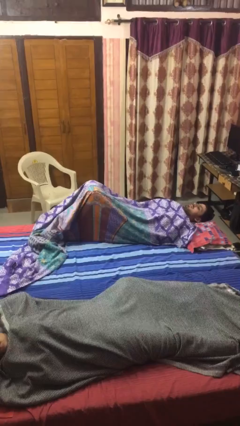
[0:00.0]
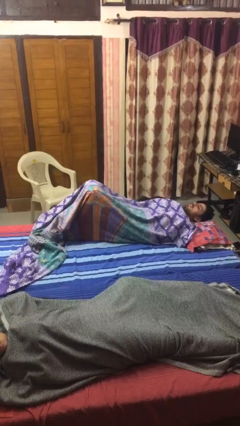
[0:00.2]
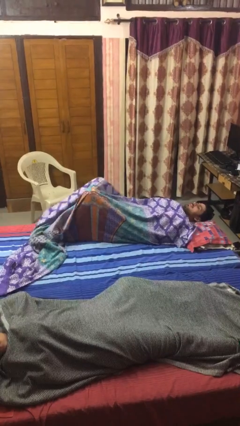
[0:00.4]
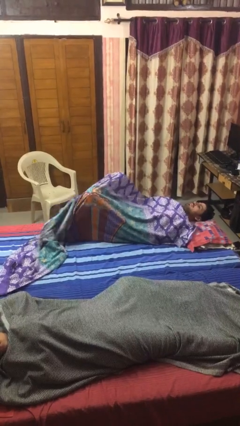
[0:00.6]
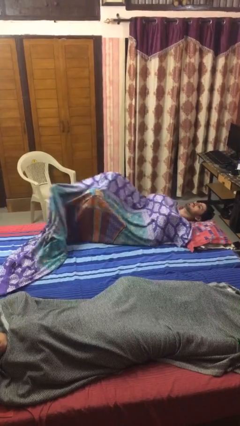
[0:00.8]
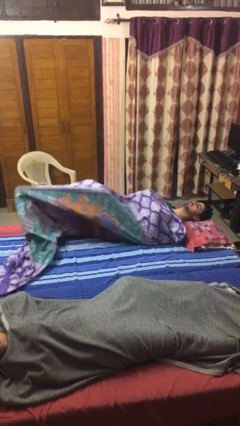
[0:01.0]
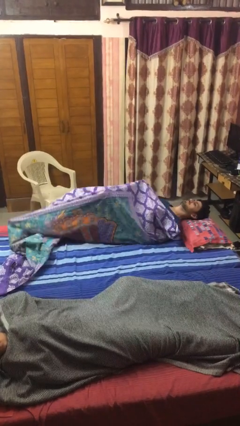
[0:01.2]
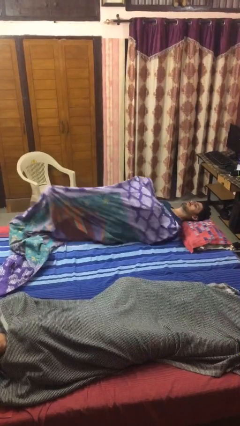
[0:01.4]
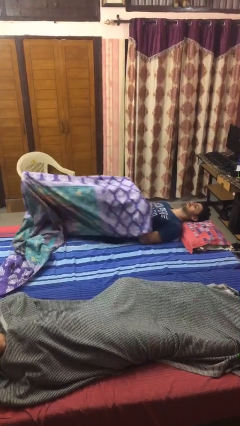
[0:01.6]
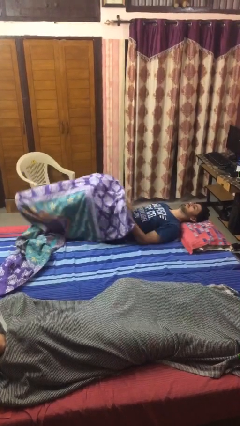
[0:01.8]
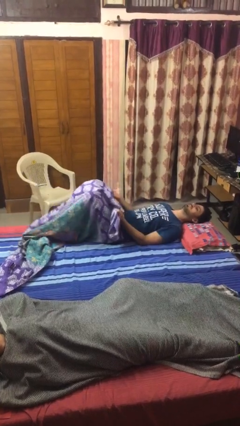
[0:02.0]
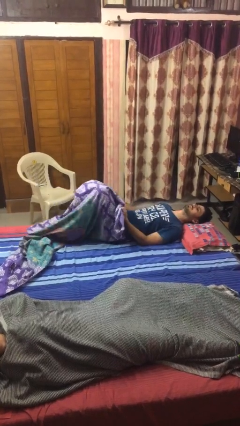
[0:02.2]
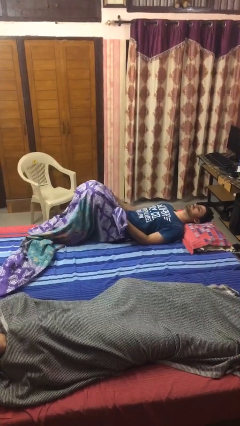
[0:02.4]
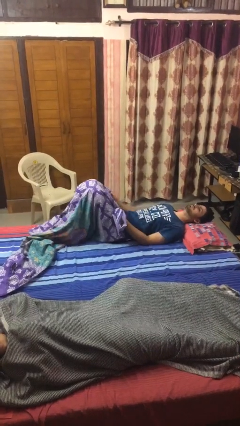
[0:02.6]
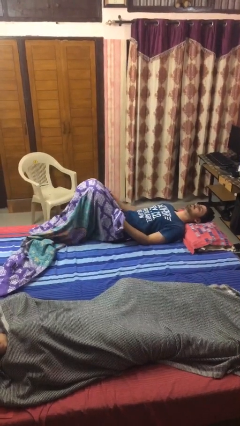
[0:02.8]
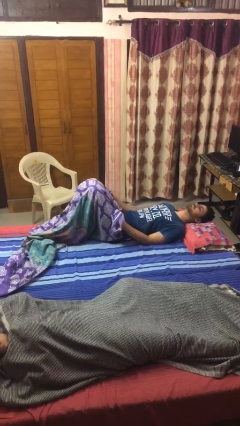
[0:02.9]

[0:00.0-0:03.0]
person uncovers with bedsheets

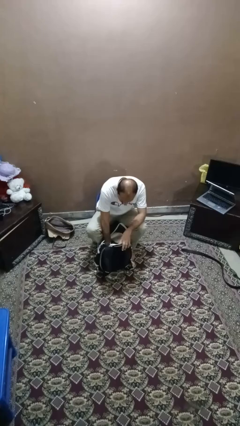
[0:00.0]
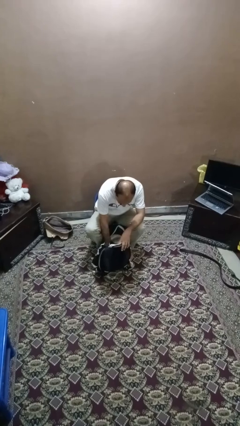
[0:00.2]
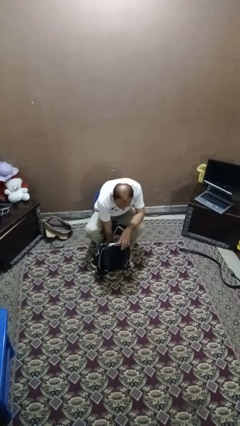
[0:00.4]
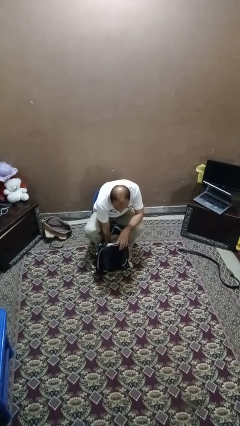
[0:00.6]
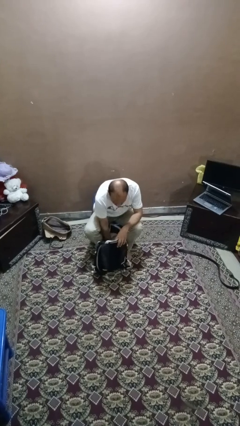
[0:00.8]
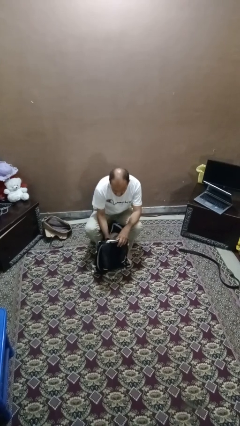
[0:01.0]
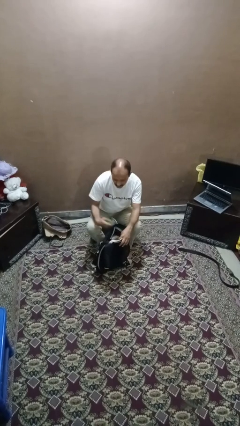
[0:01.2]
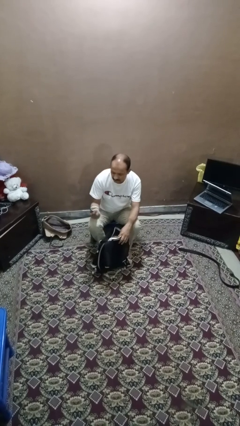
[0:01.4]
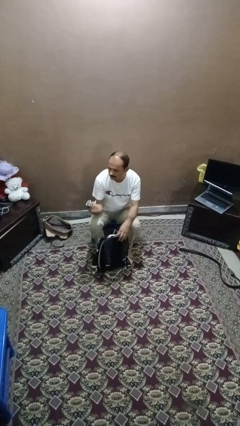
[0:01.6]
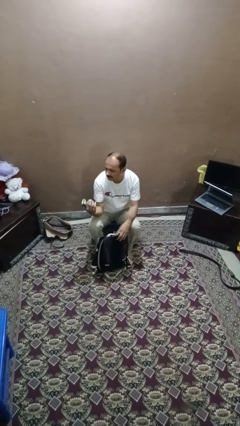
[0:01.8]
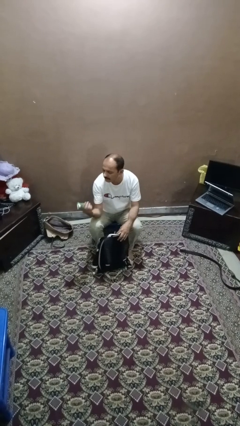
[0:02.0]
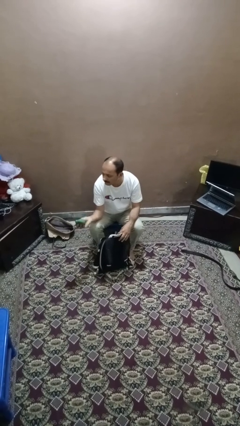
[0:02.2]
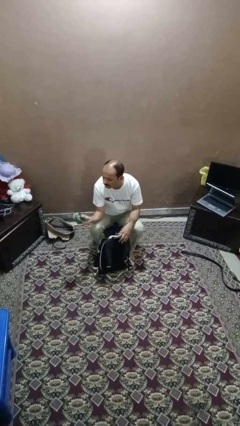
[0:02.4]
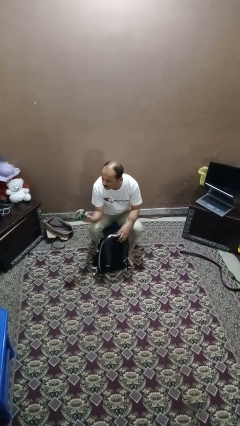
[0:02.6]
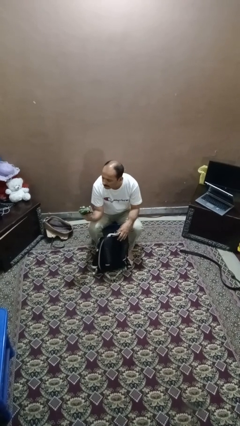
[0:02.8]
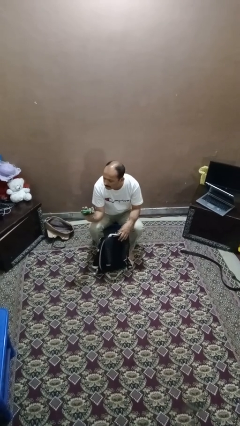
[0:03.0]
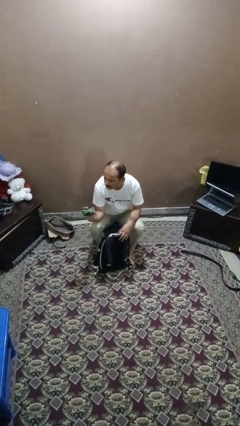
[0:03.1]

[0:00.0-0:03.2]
person takes object from backpack

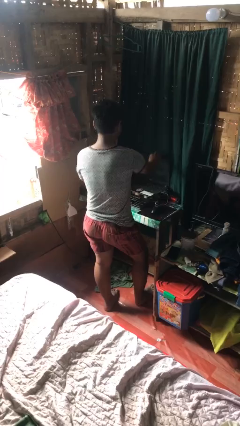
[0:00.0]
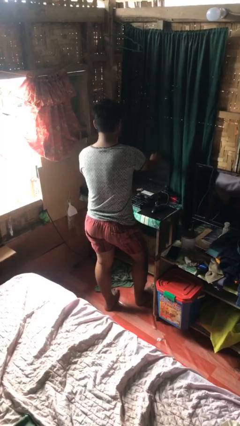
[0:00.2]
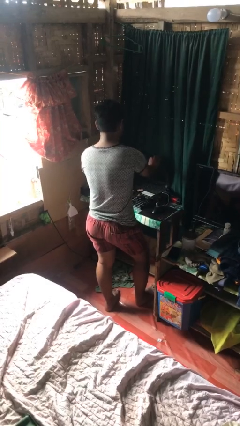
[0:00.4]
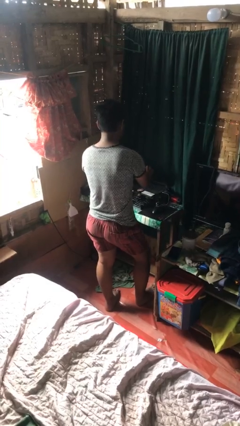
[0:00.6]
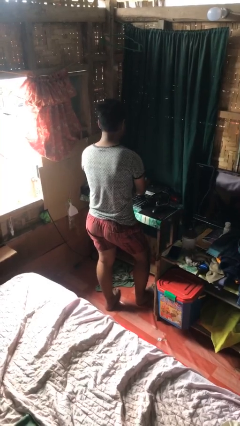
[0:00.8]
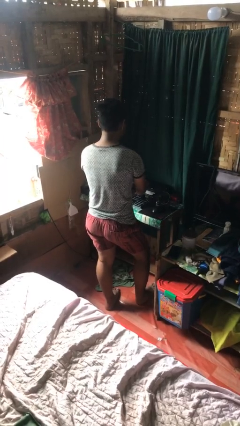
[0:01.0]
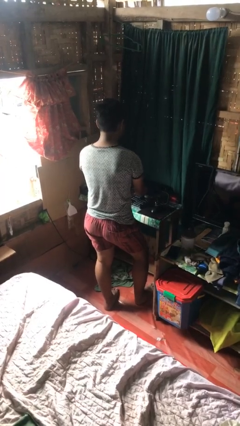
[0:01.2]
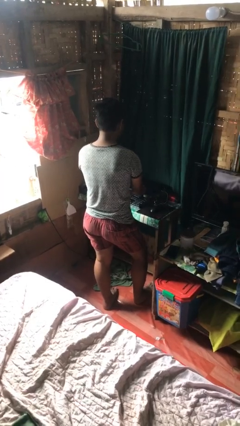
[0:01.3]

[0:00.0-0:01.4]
person closes laptop

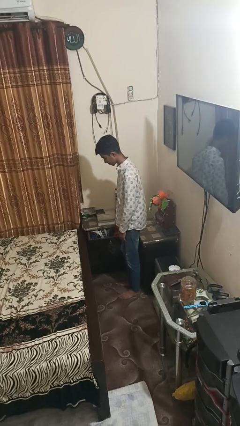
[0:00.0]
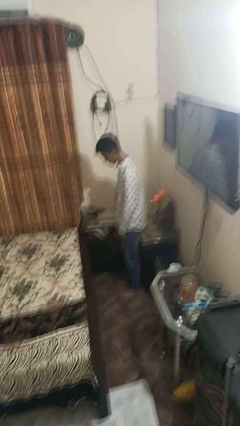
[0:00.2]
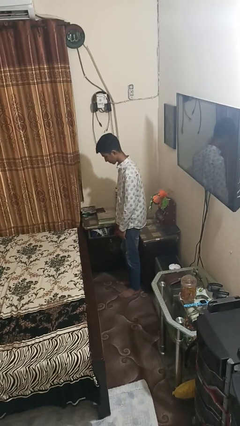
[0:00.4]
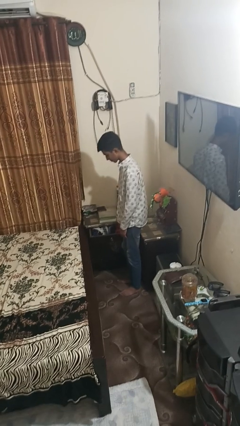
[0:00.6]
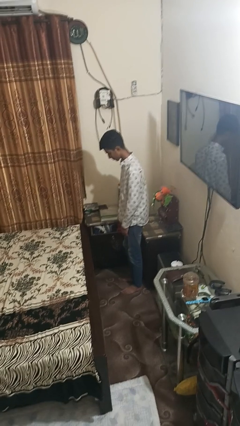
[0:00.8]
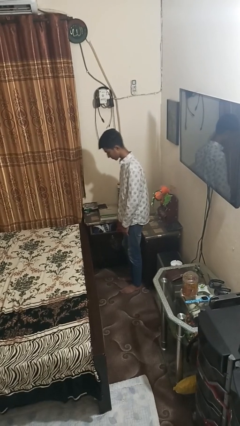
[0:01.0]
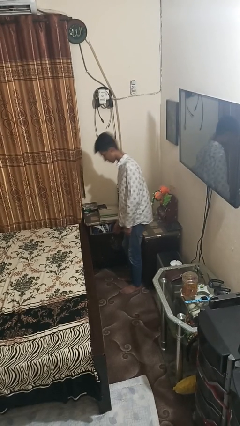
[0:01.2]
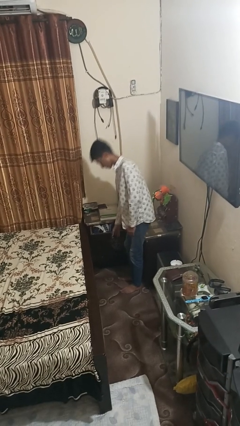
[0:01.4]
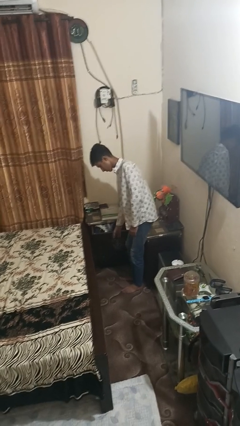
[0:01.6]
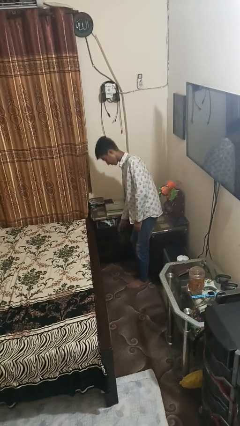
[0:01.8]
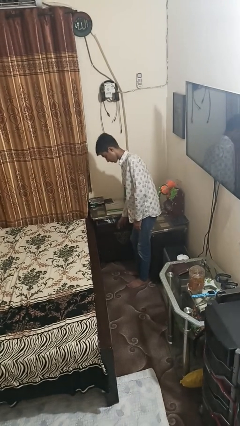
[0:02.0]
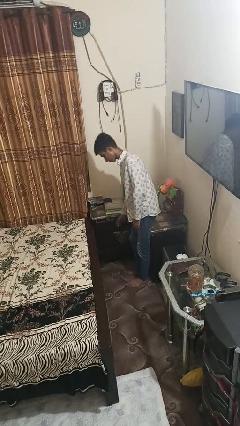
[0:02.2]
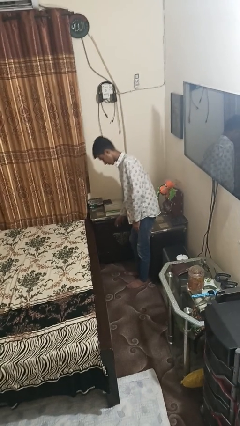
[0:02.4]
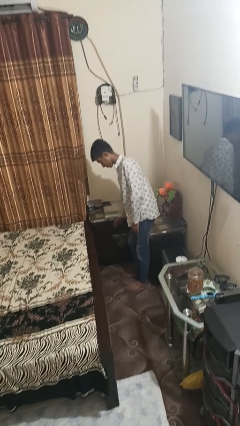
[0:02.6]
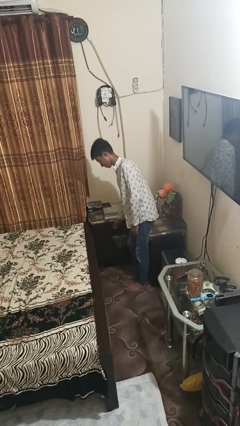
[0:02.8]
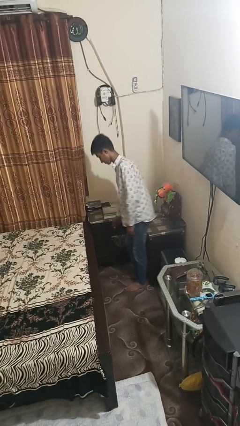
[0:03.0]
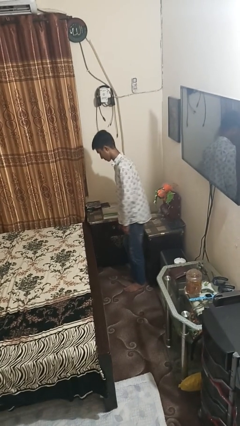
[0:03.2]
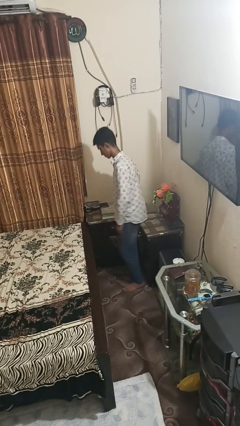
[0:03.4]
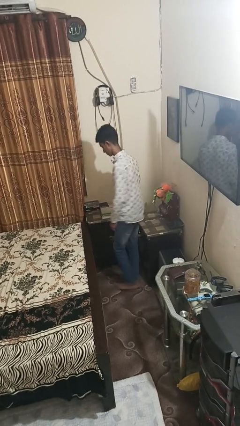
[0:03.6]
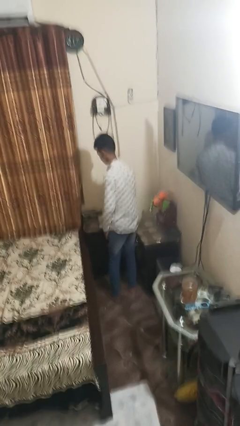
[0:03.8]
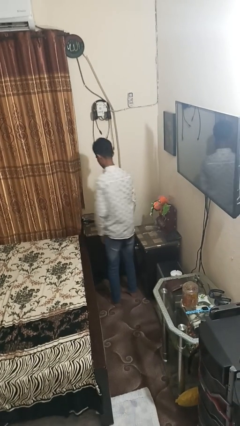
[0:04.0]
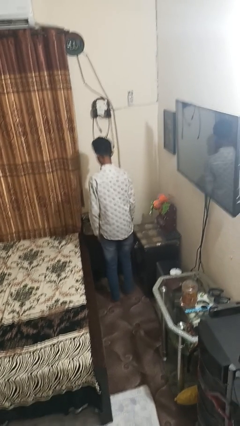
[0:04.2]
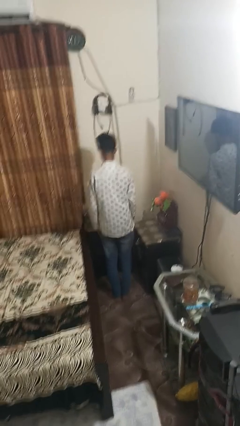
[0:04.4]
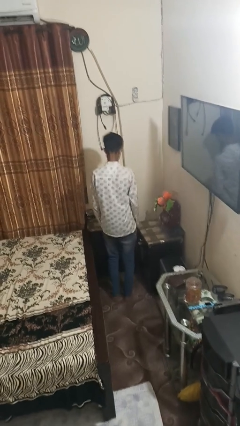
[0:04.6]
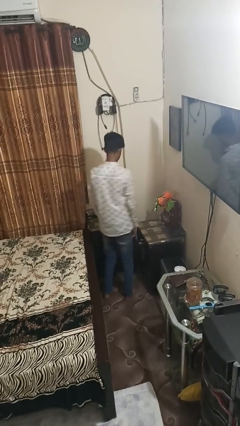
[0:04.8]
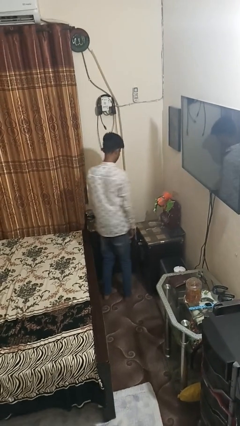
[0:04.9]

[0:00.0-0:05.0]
person closes dresser drawer

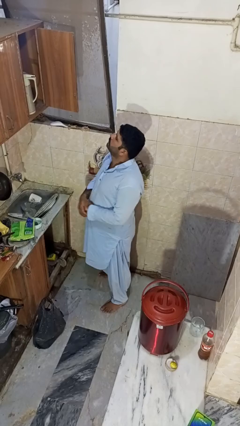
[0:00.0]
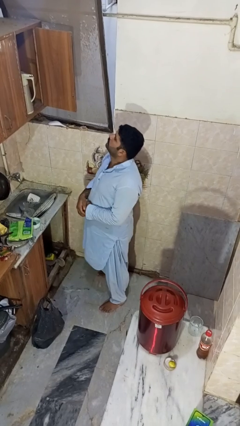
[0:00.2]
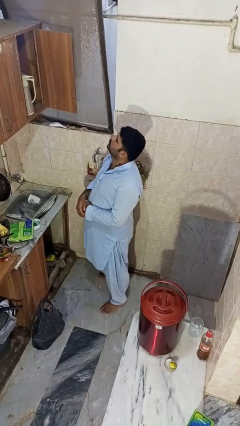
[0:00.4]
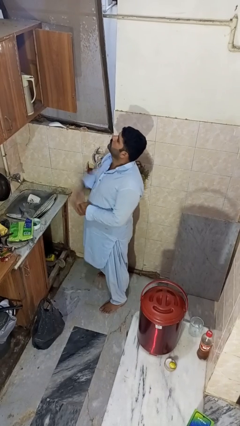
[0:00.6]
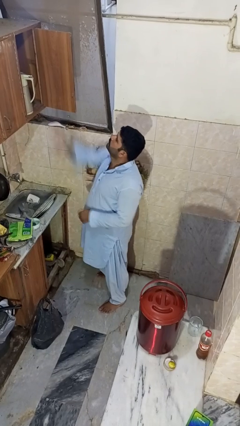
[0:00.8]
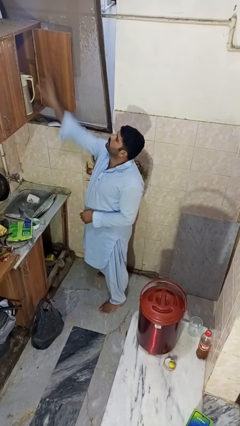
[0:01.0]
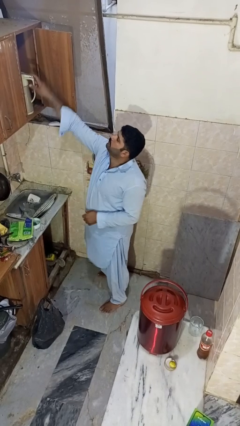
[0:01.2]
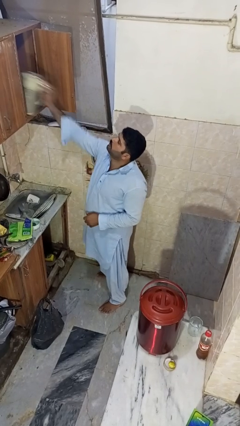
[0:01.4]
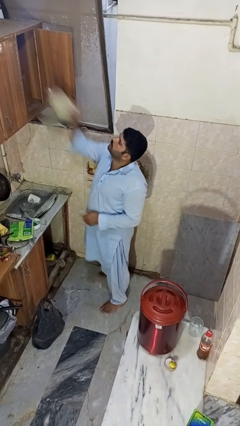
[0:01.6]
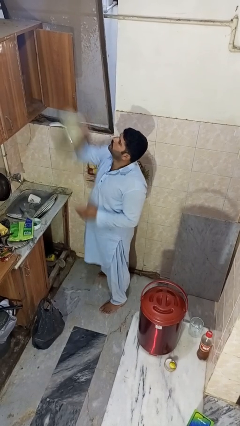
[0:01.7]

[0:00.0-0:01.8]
person takes object from cabinet

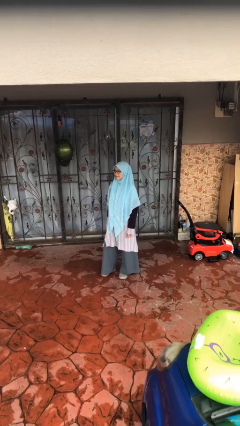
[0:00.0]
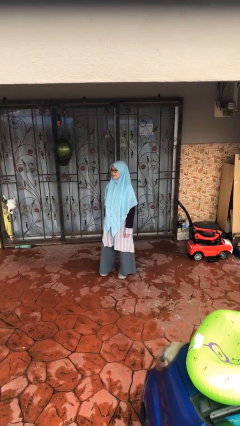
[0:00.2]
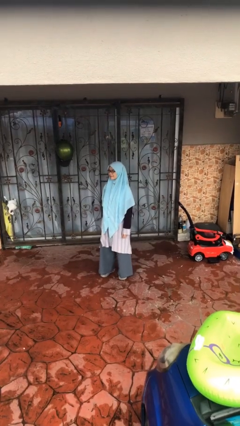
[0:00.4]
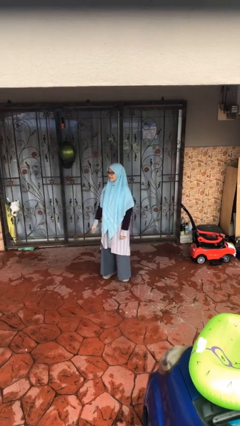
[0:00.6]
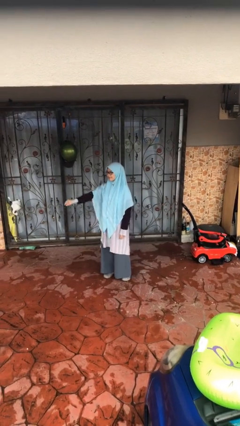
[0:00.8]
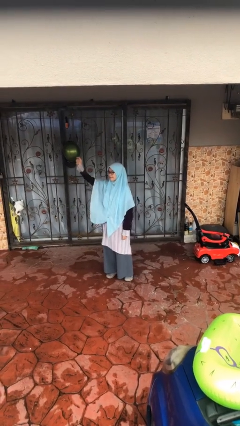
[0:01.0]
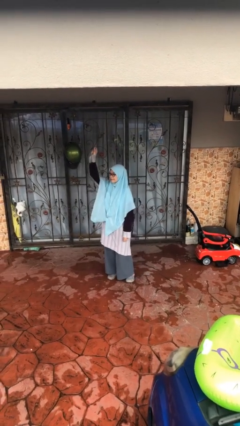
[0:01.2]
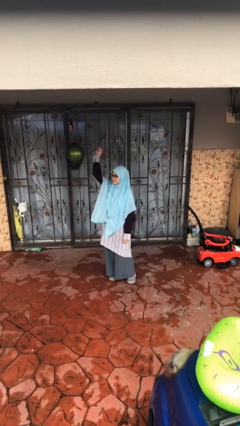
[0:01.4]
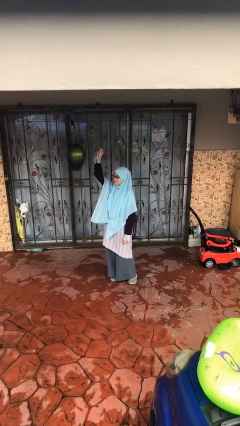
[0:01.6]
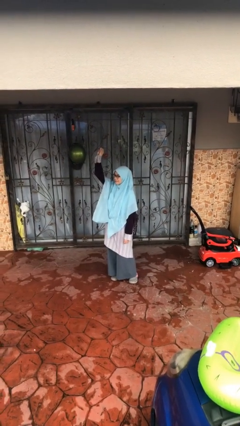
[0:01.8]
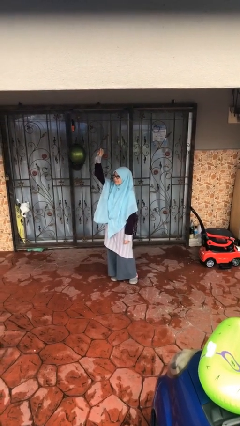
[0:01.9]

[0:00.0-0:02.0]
person gestures raise hand

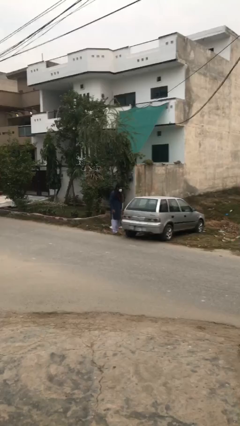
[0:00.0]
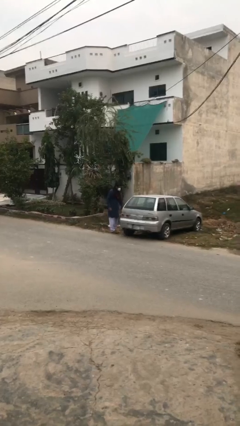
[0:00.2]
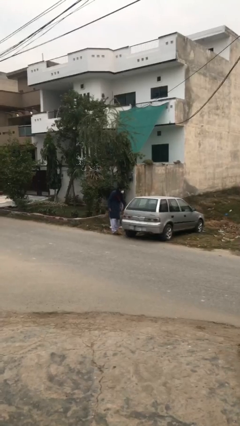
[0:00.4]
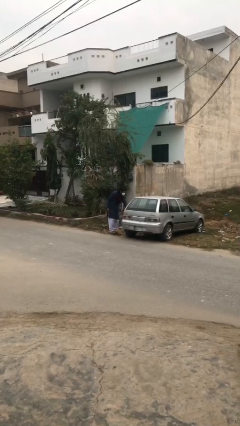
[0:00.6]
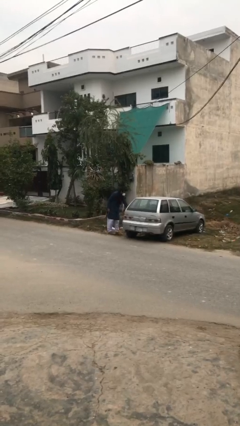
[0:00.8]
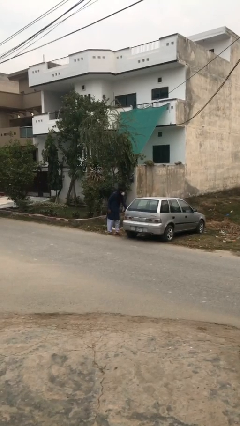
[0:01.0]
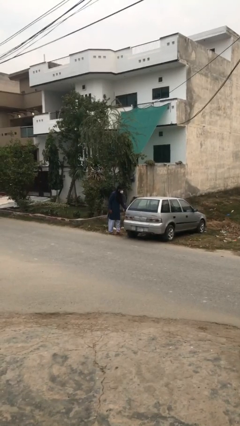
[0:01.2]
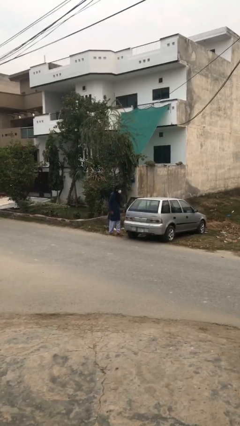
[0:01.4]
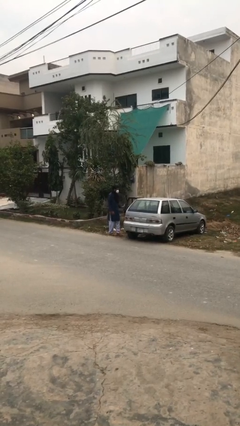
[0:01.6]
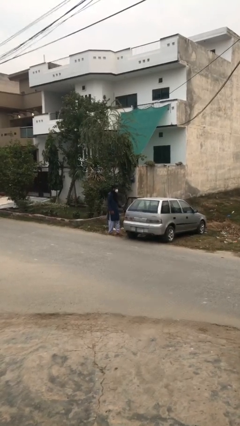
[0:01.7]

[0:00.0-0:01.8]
person opens car door
